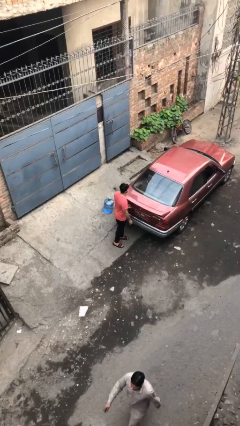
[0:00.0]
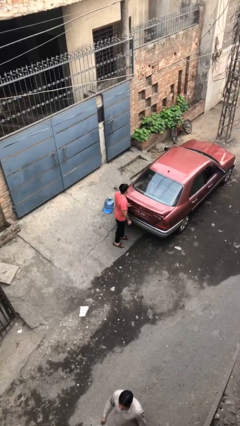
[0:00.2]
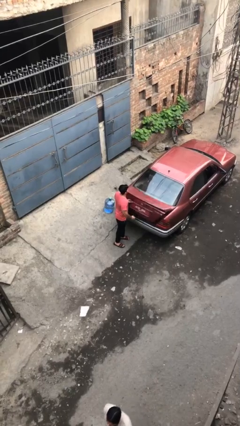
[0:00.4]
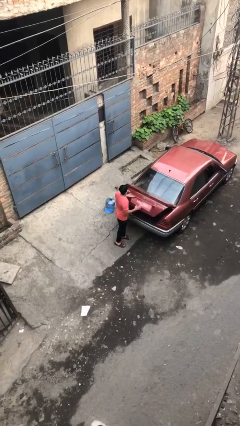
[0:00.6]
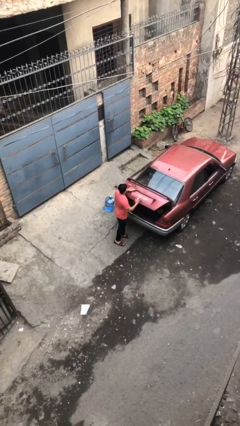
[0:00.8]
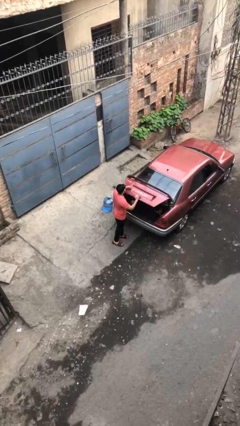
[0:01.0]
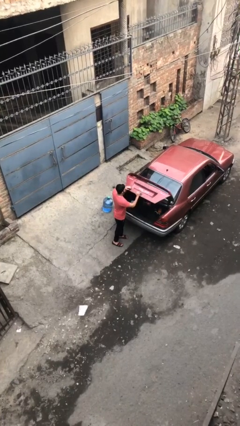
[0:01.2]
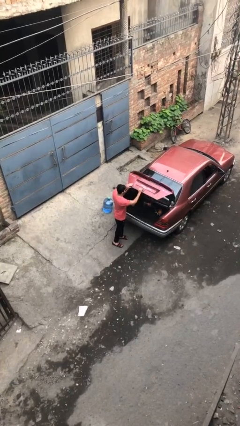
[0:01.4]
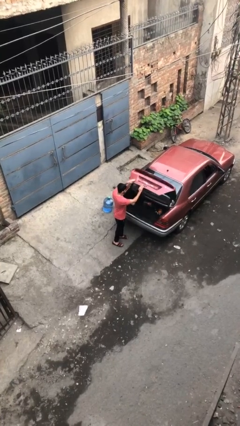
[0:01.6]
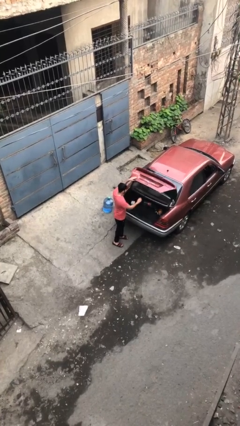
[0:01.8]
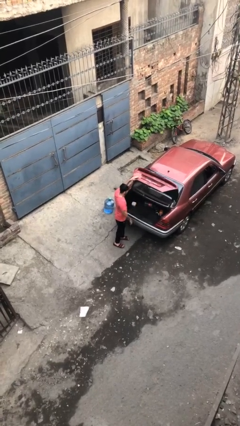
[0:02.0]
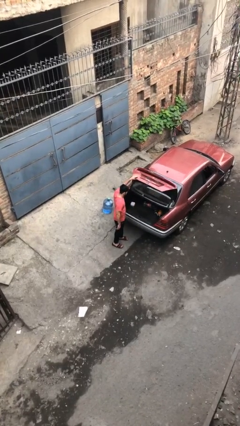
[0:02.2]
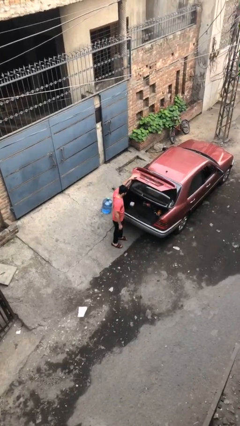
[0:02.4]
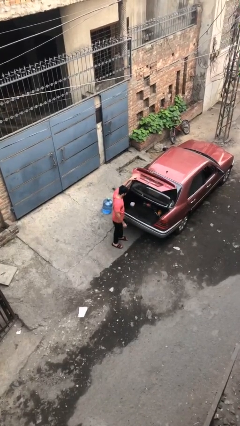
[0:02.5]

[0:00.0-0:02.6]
person opens car trunk

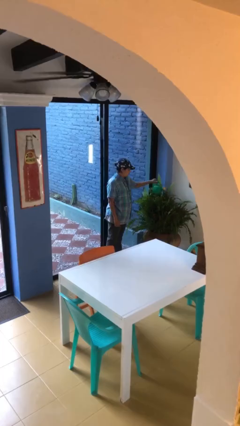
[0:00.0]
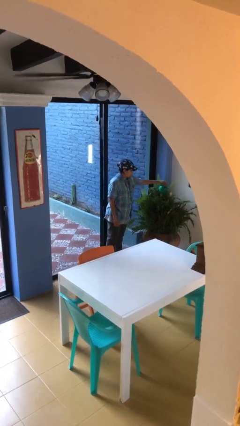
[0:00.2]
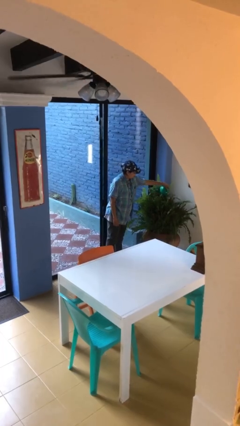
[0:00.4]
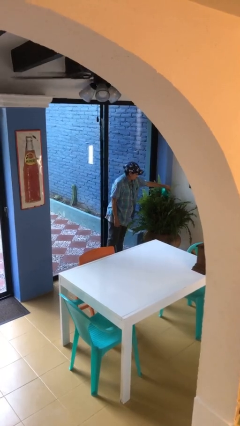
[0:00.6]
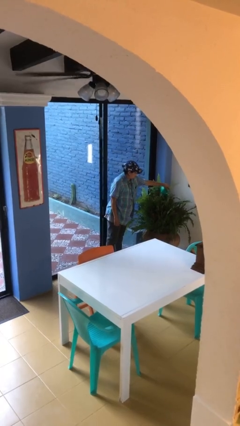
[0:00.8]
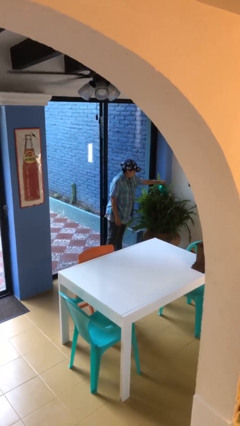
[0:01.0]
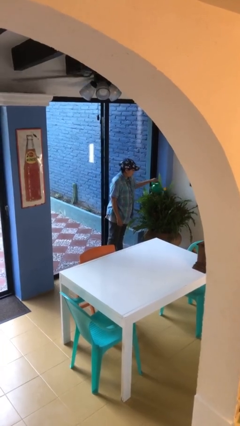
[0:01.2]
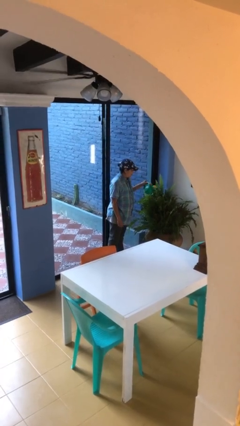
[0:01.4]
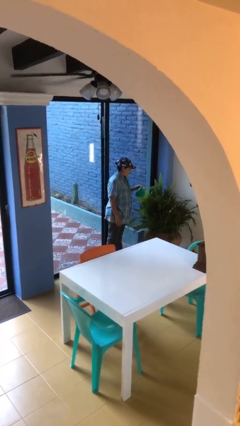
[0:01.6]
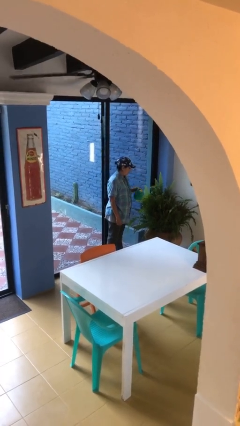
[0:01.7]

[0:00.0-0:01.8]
person waters houseplant

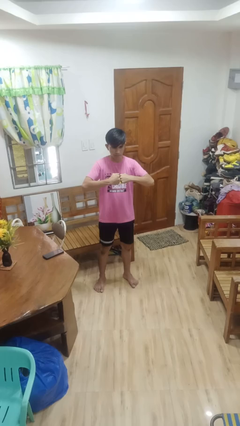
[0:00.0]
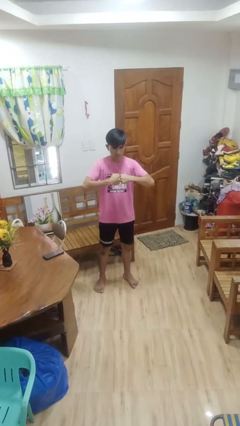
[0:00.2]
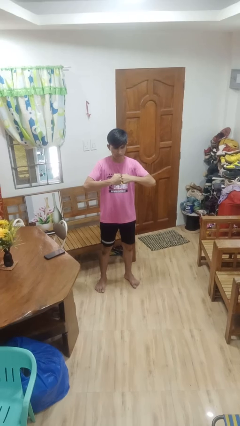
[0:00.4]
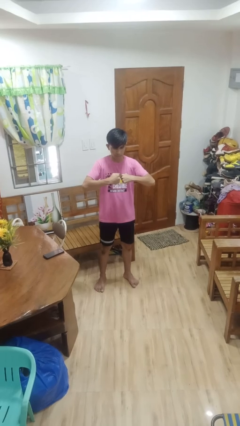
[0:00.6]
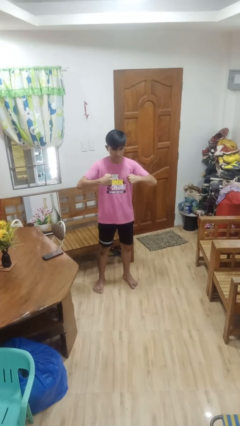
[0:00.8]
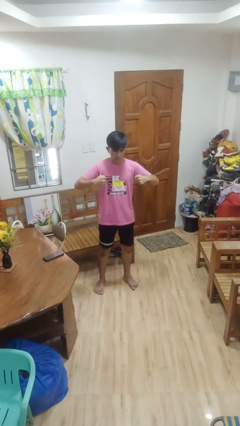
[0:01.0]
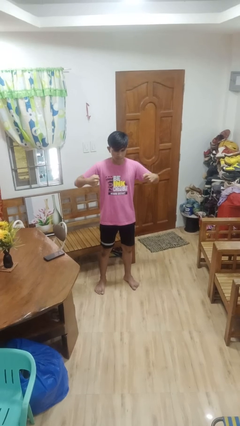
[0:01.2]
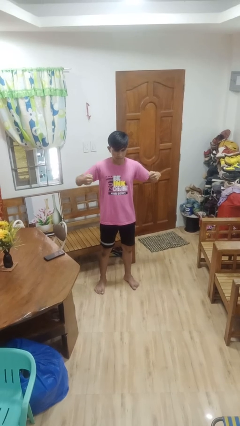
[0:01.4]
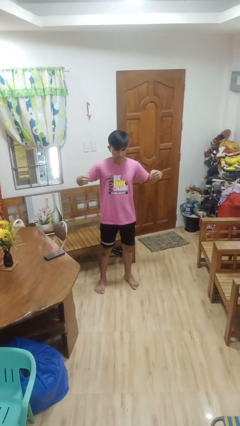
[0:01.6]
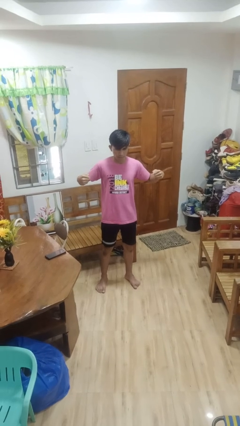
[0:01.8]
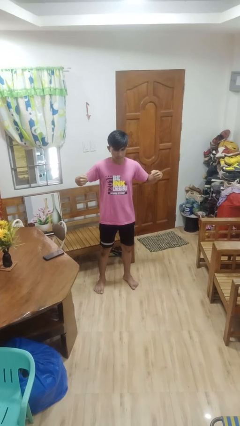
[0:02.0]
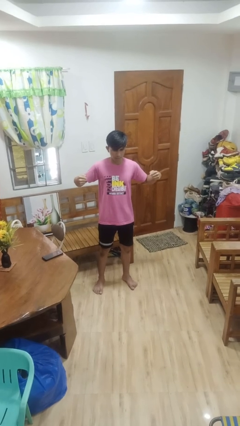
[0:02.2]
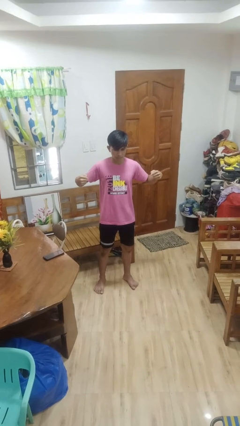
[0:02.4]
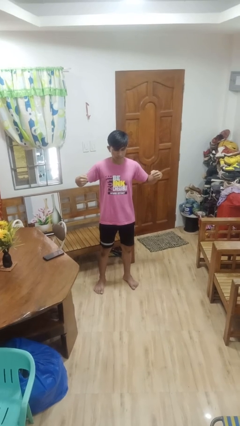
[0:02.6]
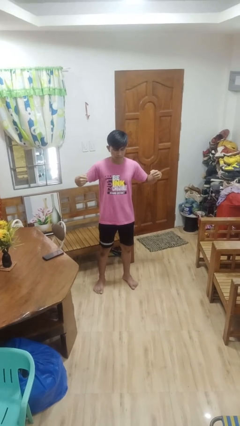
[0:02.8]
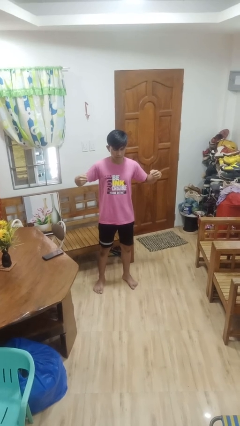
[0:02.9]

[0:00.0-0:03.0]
person gestures zoom in

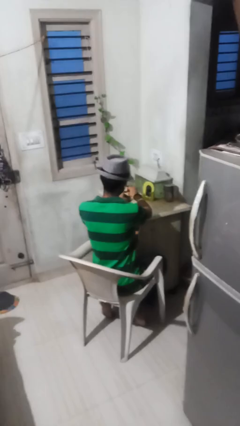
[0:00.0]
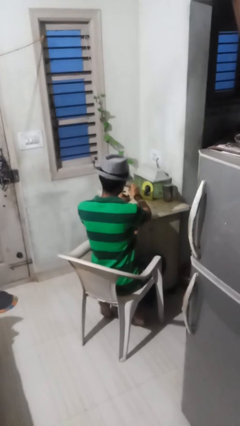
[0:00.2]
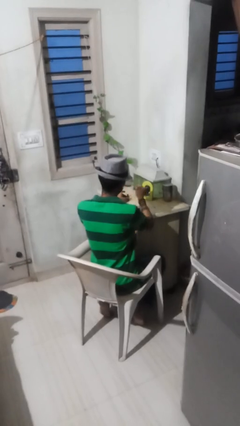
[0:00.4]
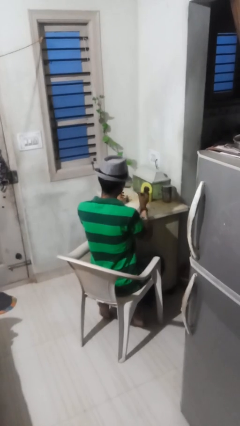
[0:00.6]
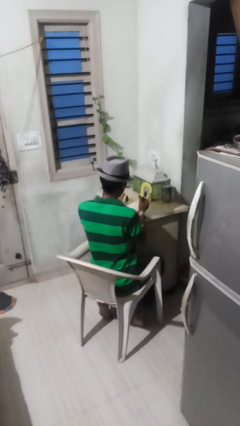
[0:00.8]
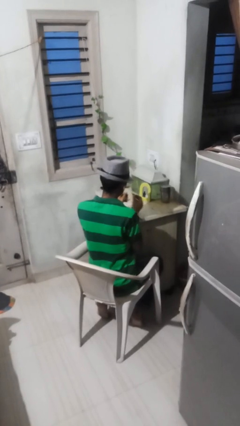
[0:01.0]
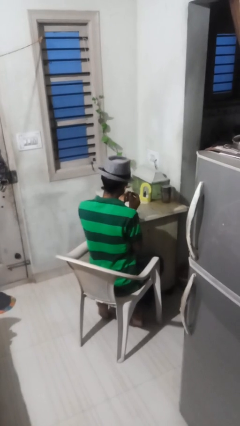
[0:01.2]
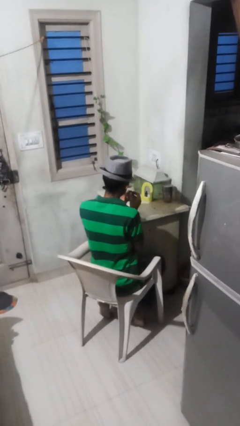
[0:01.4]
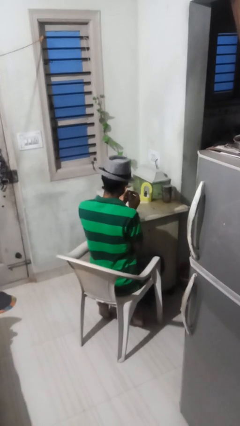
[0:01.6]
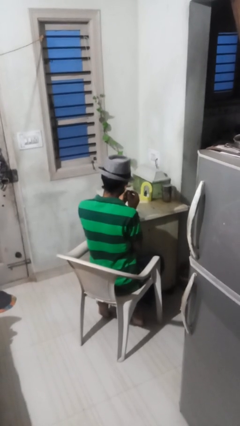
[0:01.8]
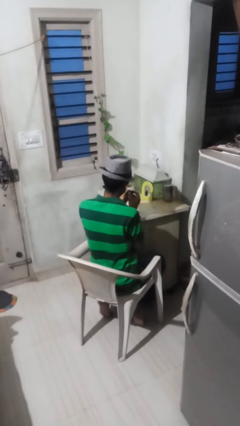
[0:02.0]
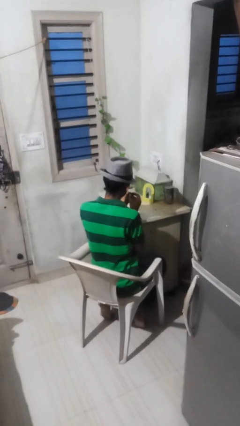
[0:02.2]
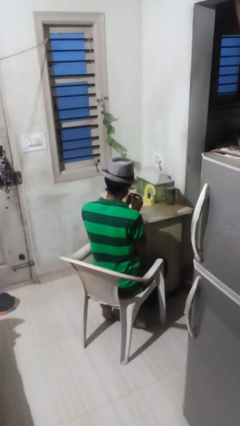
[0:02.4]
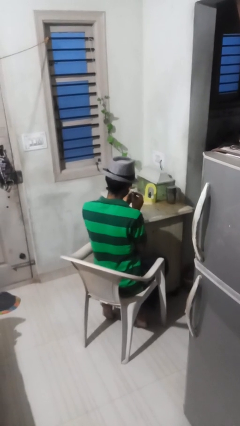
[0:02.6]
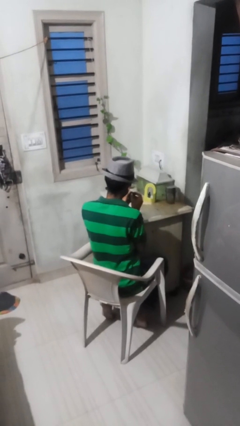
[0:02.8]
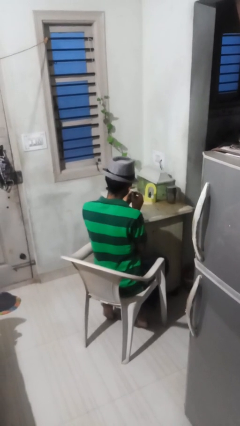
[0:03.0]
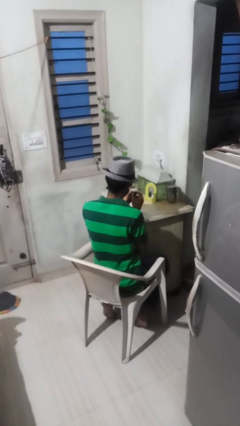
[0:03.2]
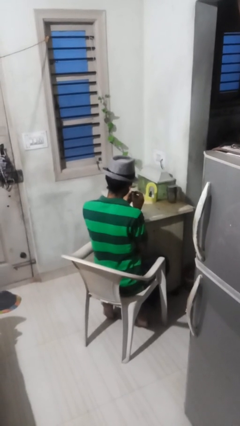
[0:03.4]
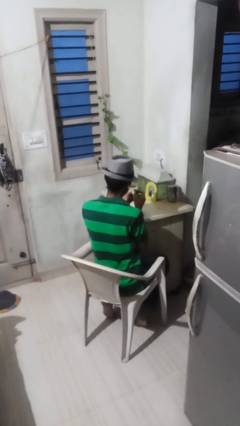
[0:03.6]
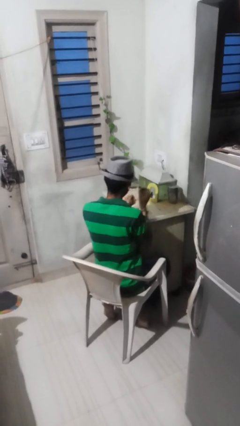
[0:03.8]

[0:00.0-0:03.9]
person paints fingernails

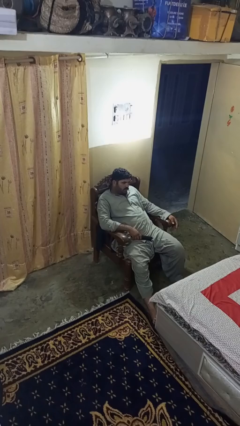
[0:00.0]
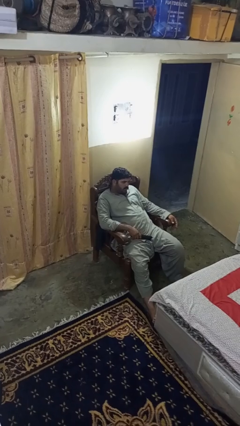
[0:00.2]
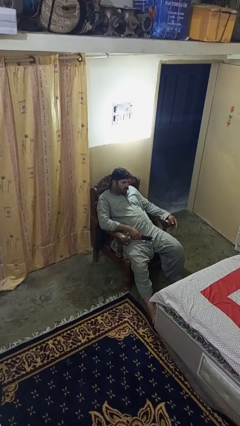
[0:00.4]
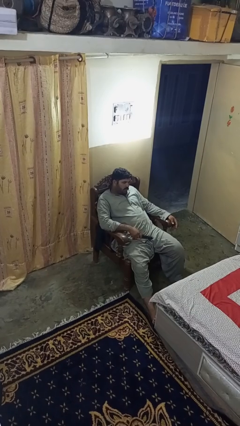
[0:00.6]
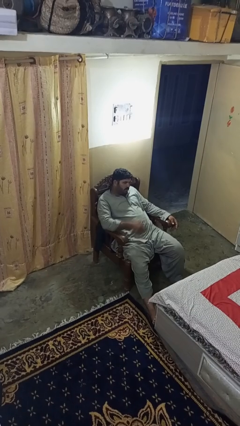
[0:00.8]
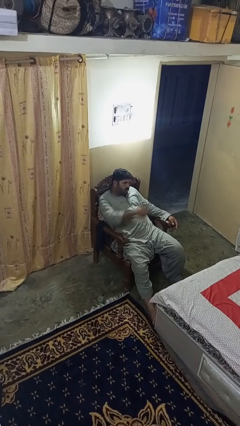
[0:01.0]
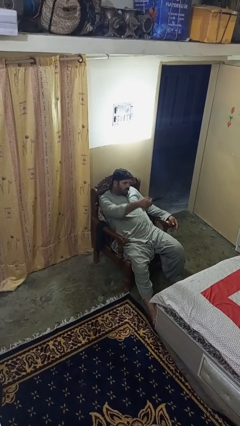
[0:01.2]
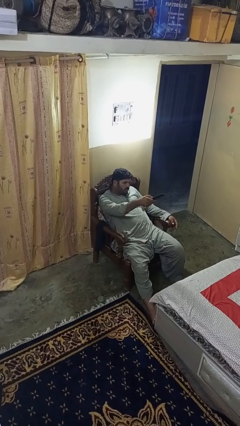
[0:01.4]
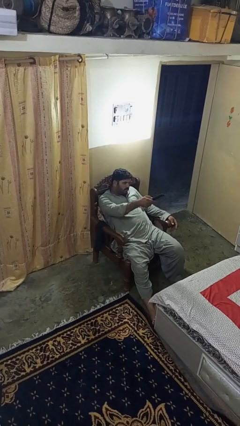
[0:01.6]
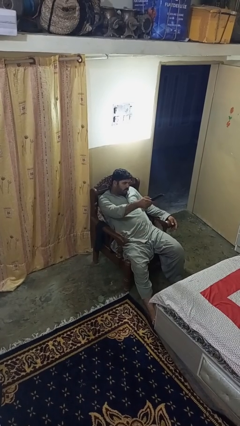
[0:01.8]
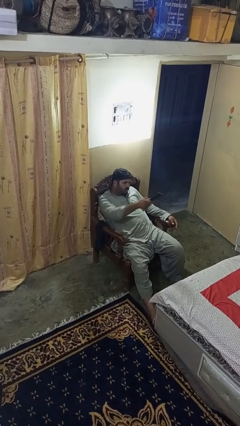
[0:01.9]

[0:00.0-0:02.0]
person uses television remote

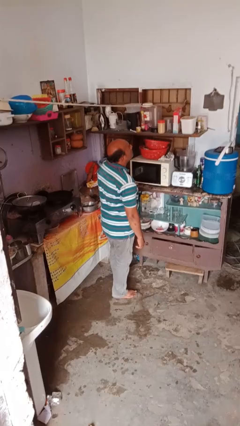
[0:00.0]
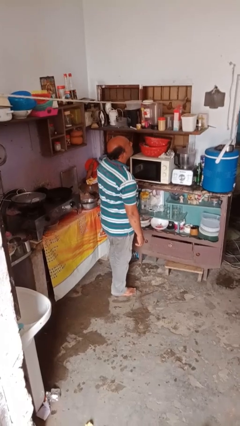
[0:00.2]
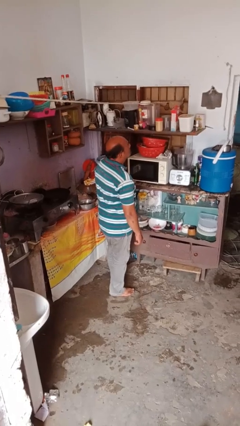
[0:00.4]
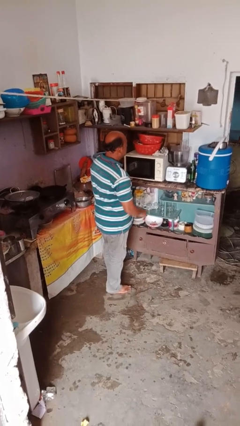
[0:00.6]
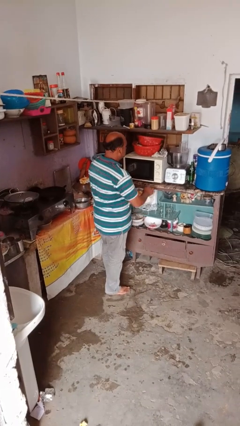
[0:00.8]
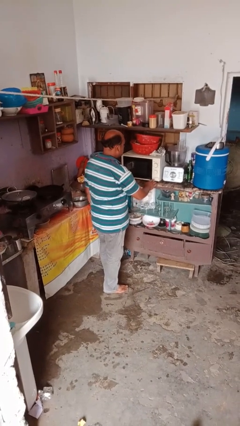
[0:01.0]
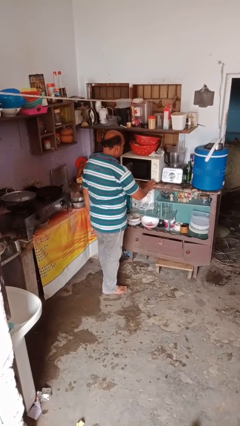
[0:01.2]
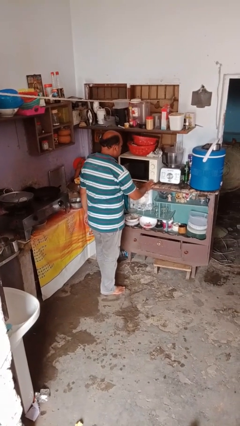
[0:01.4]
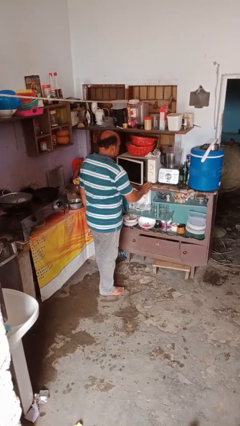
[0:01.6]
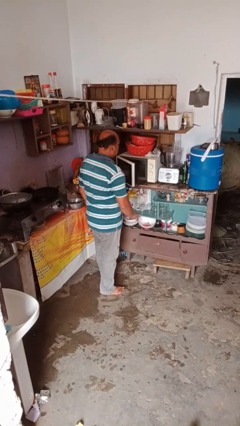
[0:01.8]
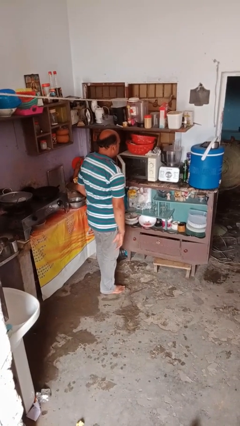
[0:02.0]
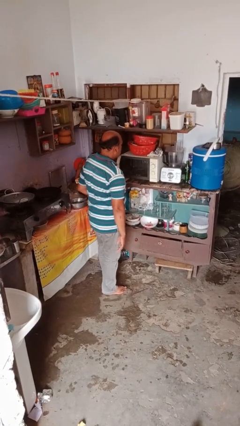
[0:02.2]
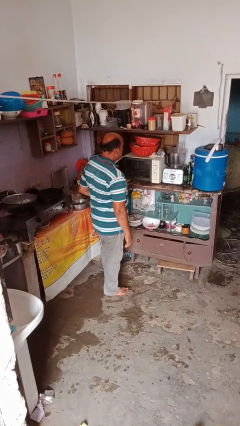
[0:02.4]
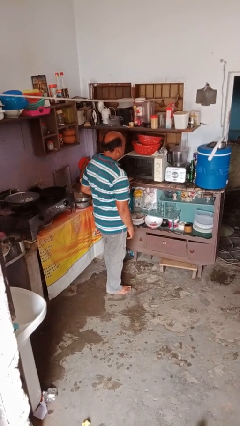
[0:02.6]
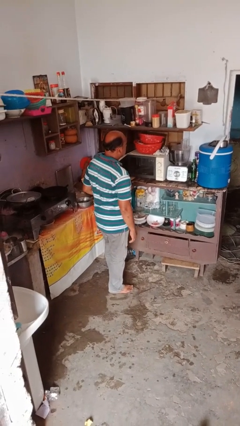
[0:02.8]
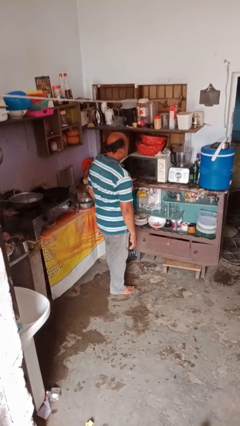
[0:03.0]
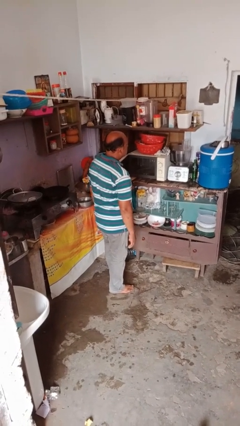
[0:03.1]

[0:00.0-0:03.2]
person opens microwave

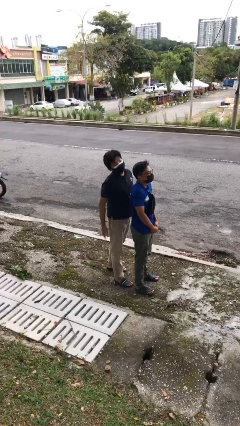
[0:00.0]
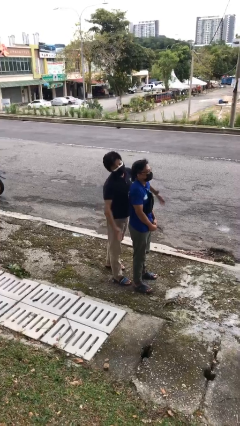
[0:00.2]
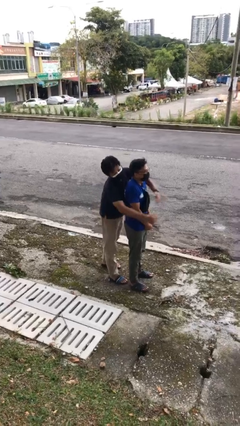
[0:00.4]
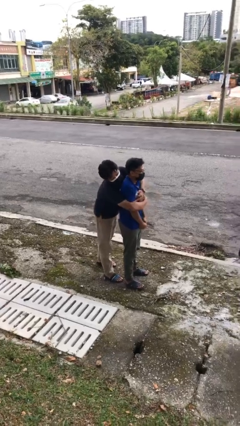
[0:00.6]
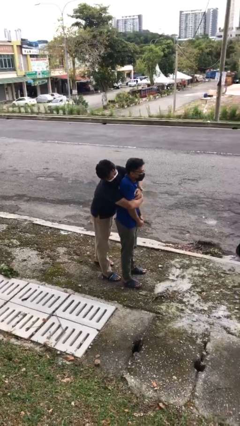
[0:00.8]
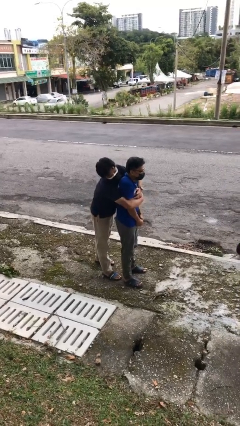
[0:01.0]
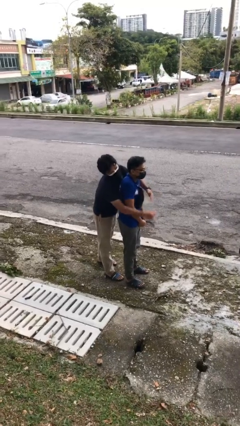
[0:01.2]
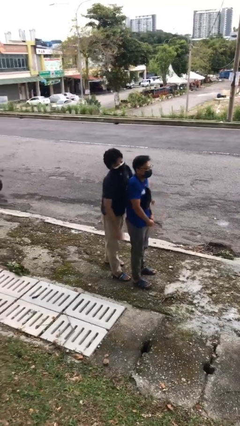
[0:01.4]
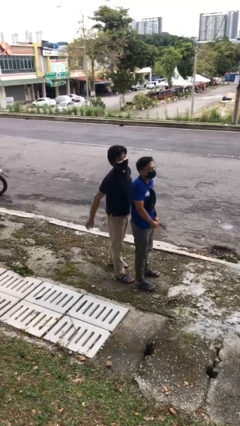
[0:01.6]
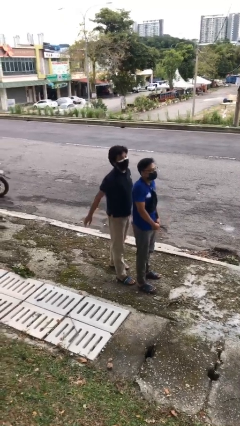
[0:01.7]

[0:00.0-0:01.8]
person hugs person from behind
